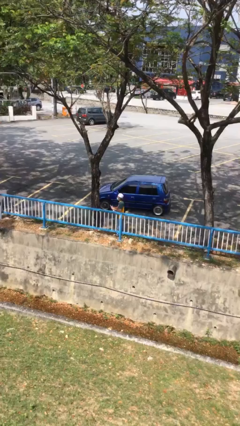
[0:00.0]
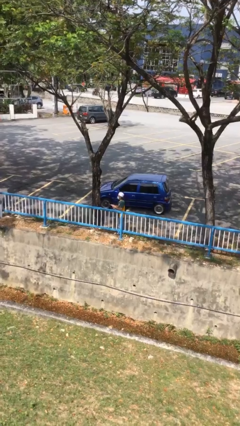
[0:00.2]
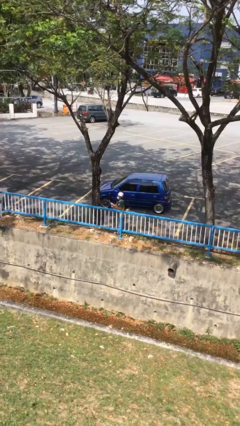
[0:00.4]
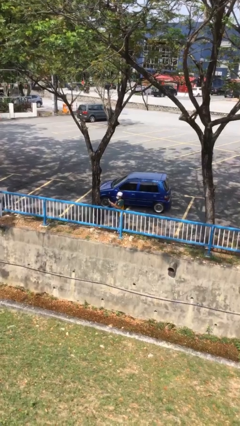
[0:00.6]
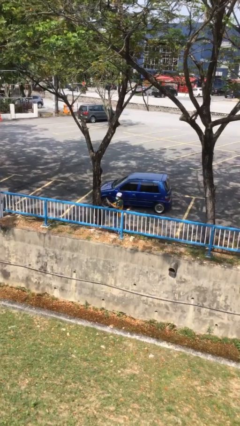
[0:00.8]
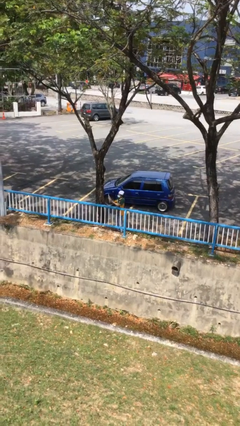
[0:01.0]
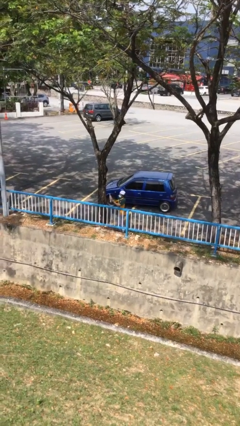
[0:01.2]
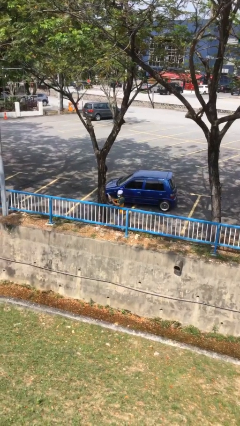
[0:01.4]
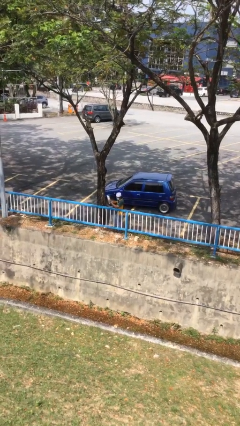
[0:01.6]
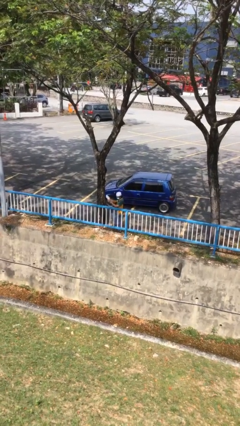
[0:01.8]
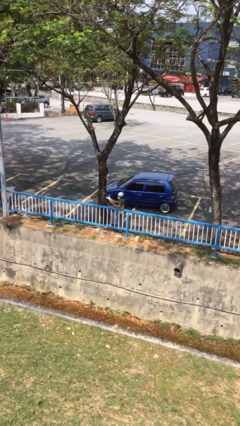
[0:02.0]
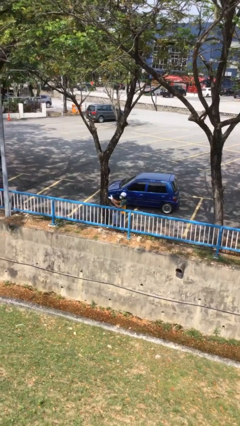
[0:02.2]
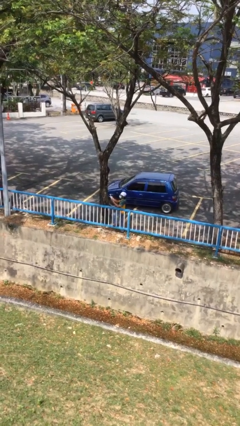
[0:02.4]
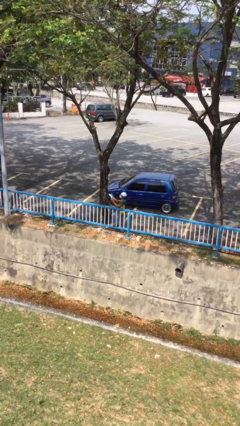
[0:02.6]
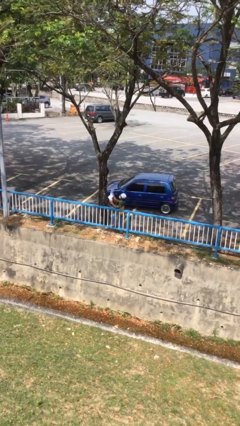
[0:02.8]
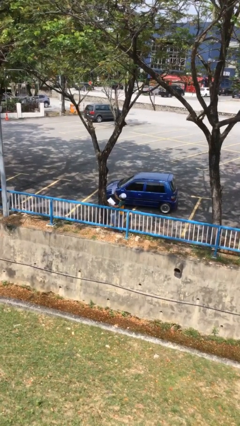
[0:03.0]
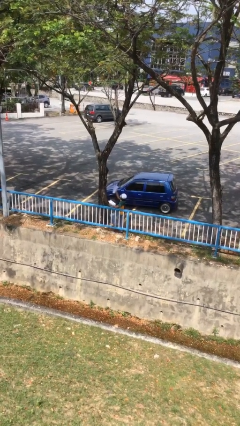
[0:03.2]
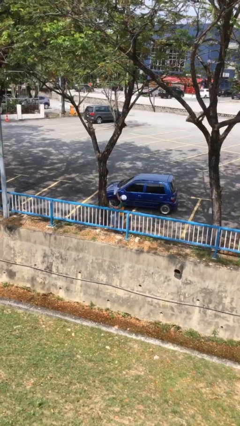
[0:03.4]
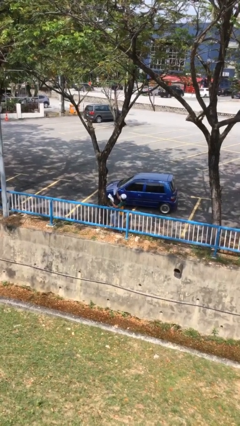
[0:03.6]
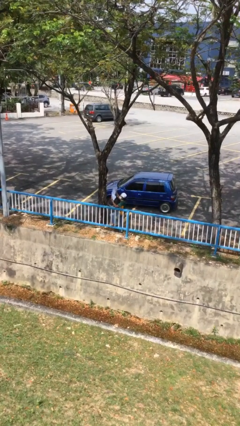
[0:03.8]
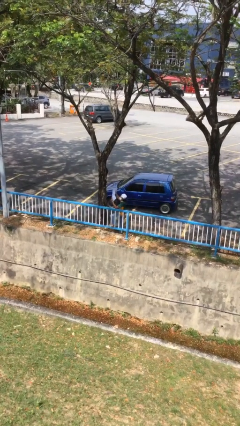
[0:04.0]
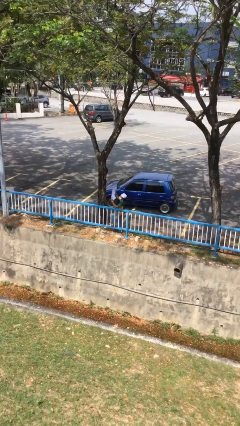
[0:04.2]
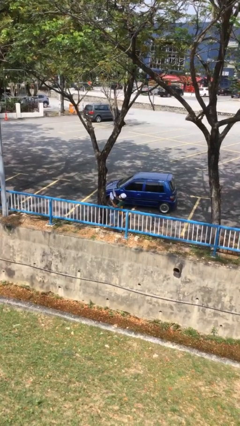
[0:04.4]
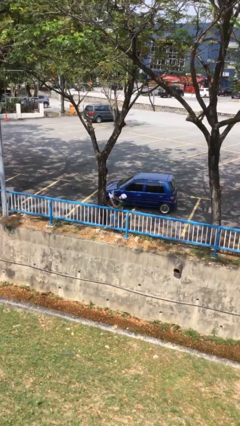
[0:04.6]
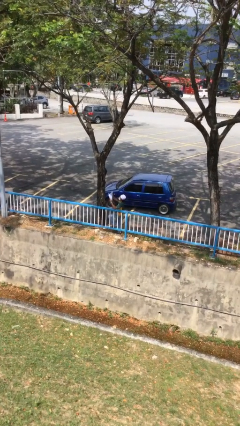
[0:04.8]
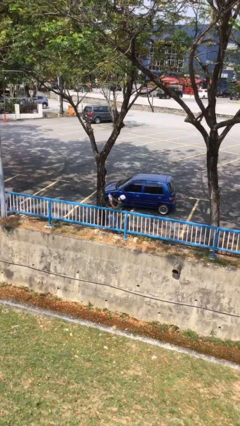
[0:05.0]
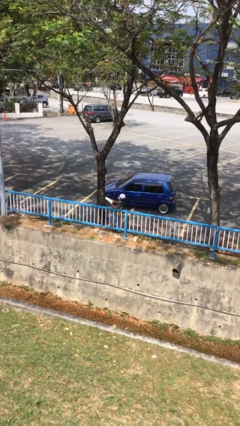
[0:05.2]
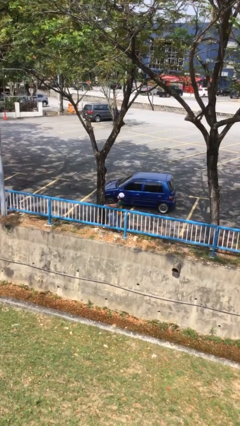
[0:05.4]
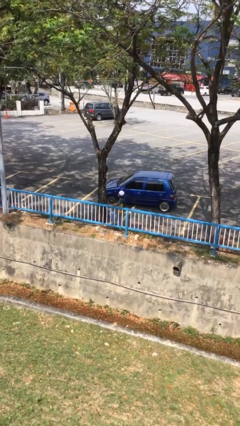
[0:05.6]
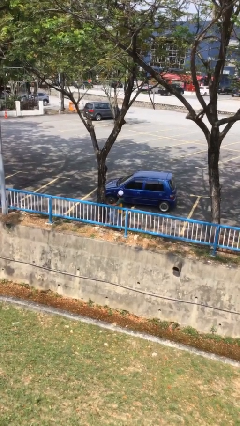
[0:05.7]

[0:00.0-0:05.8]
person reads document

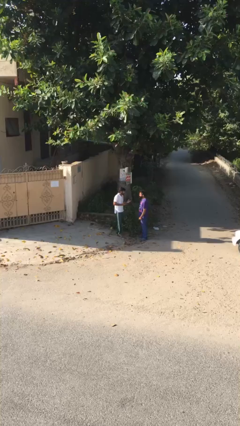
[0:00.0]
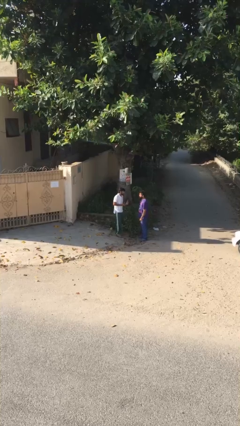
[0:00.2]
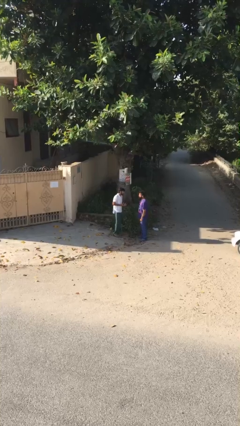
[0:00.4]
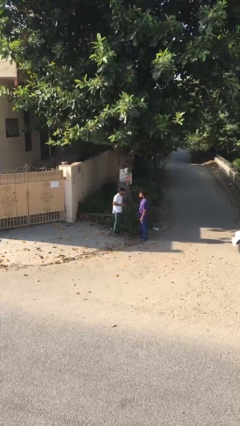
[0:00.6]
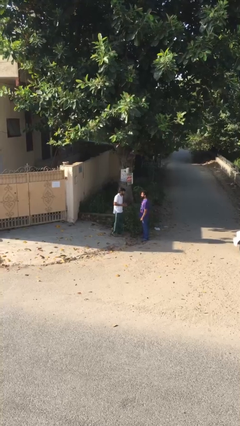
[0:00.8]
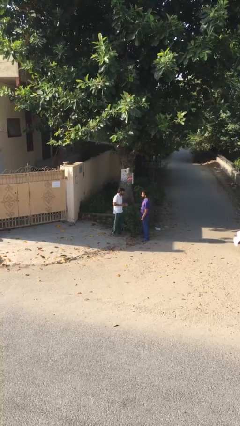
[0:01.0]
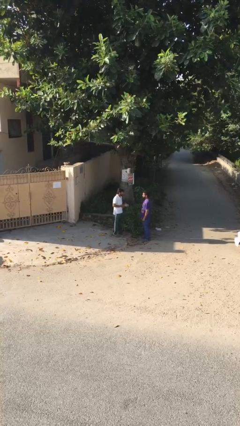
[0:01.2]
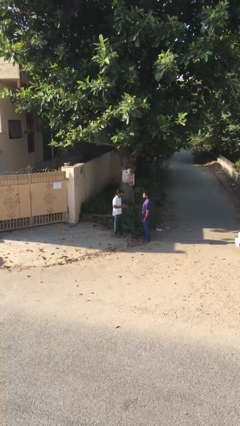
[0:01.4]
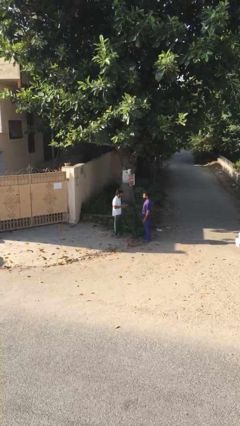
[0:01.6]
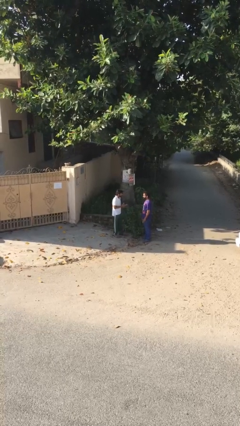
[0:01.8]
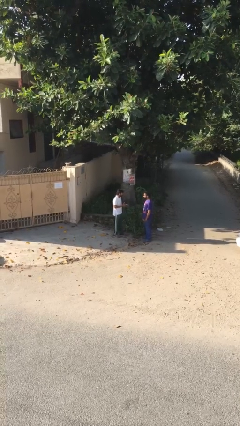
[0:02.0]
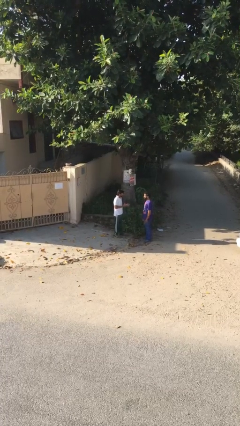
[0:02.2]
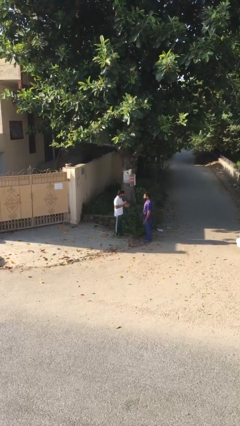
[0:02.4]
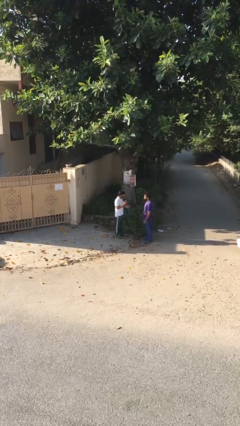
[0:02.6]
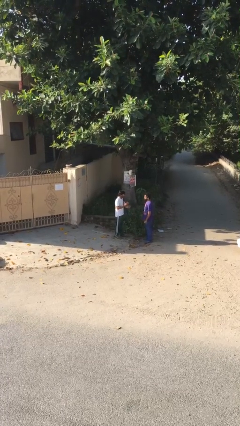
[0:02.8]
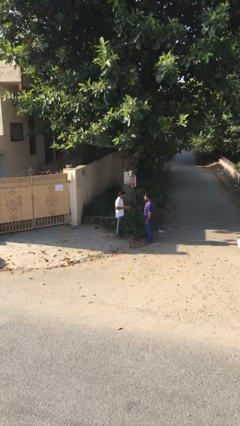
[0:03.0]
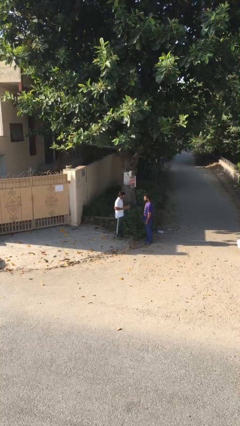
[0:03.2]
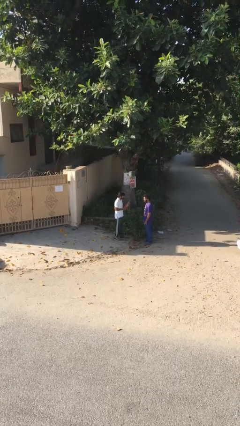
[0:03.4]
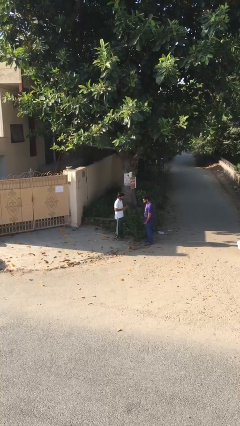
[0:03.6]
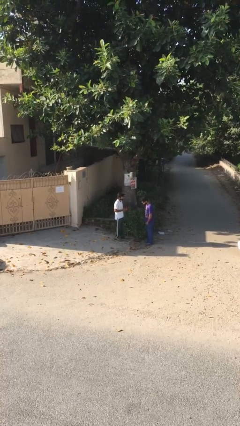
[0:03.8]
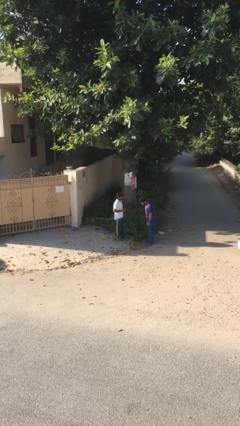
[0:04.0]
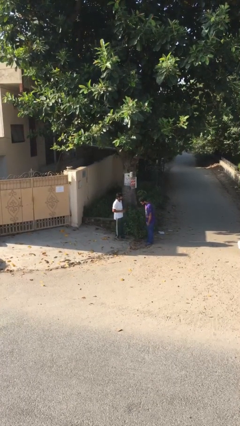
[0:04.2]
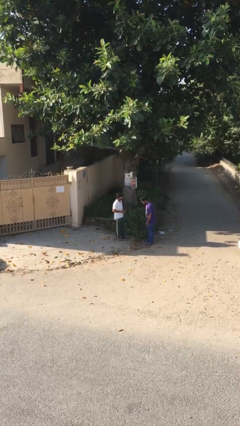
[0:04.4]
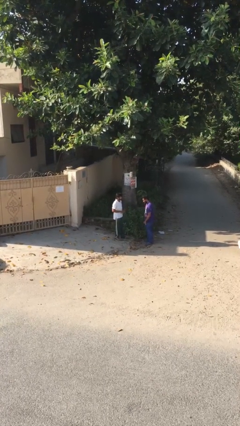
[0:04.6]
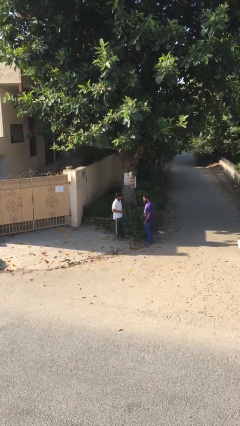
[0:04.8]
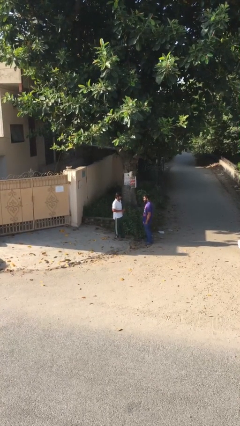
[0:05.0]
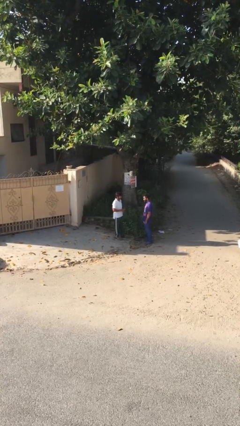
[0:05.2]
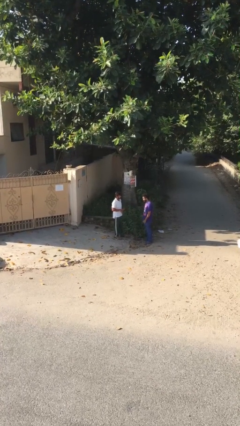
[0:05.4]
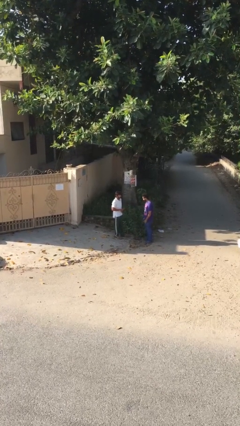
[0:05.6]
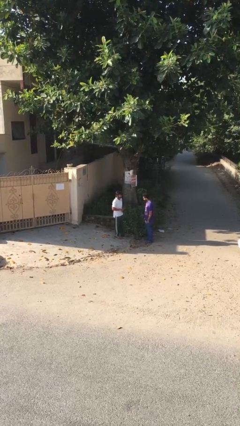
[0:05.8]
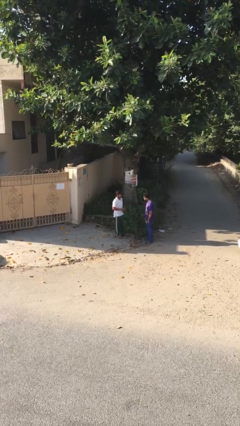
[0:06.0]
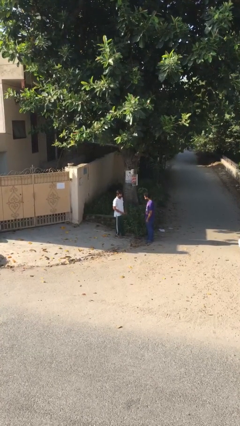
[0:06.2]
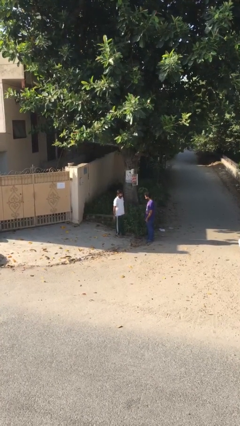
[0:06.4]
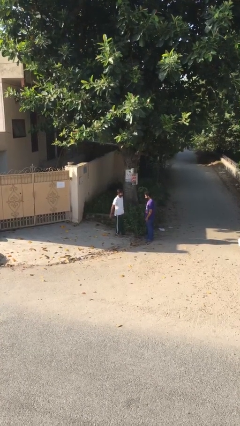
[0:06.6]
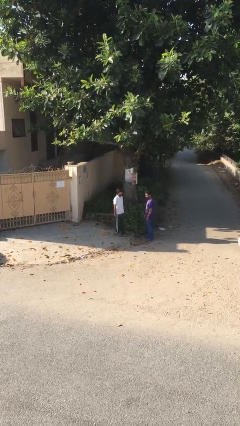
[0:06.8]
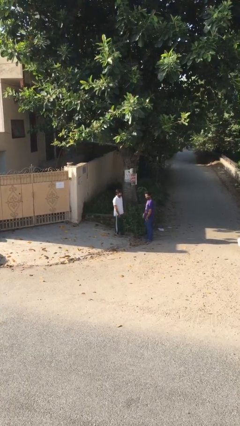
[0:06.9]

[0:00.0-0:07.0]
person talks to person

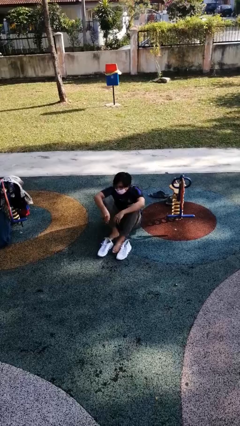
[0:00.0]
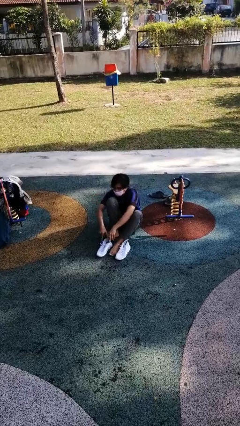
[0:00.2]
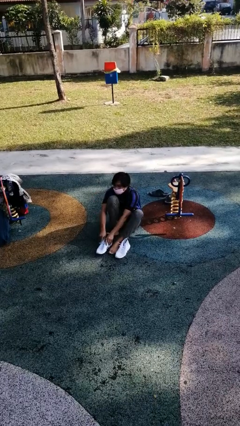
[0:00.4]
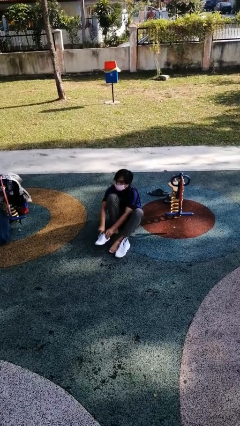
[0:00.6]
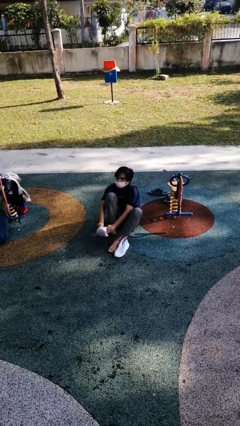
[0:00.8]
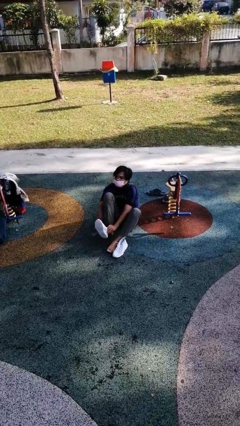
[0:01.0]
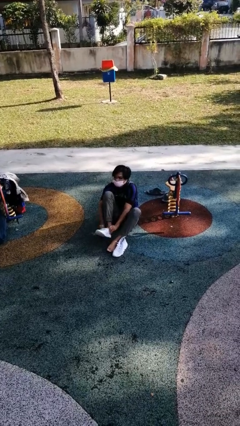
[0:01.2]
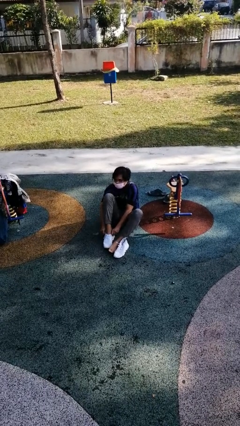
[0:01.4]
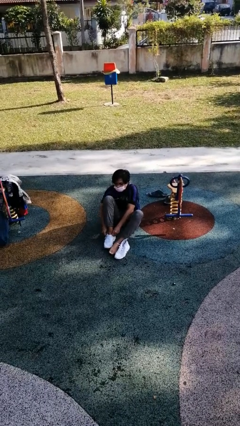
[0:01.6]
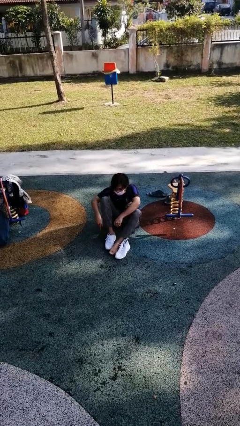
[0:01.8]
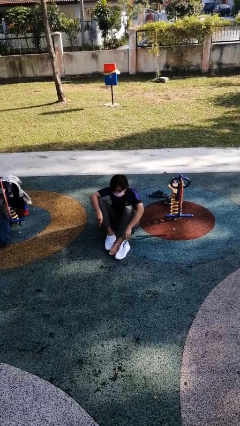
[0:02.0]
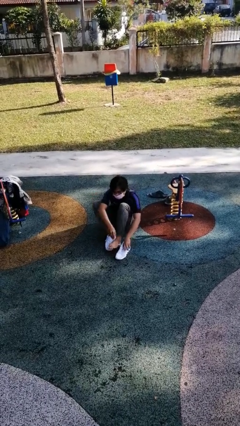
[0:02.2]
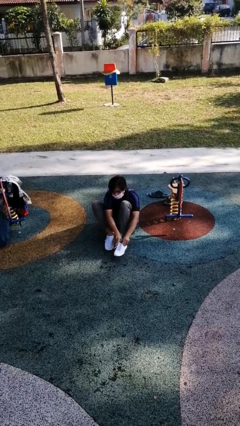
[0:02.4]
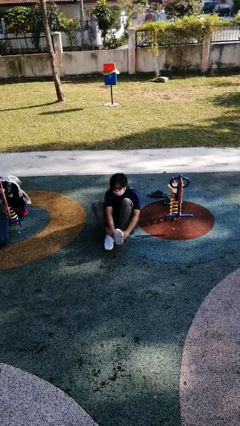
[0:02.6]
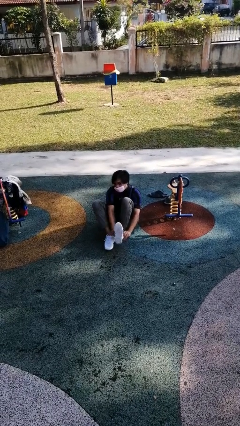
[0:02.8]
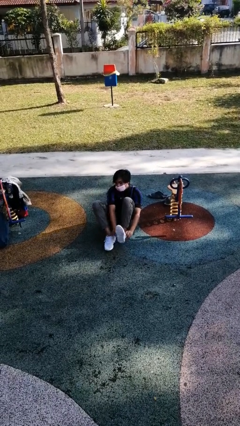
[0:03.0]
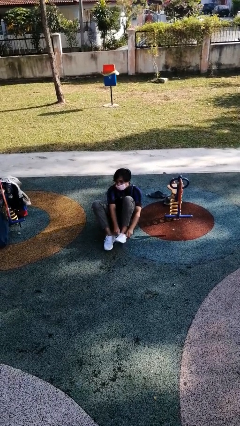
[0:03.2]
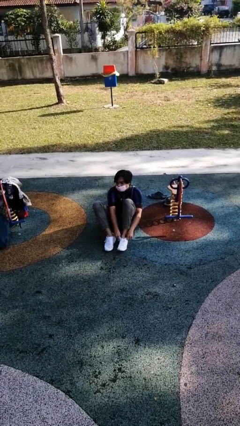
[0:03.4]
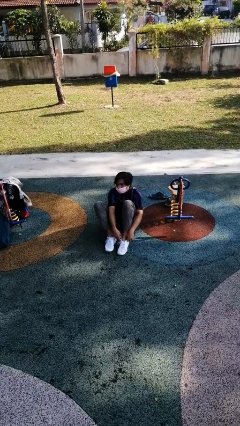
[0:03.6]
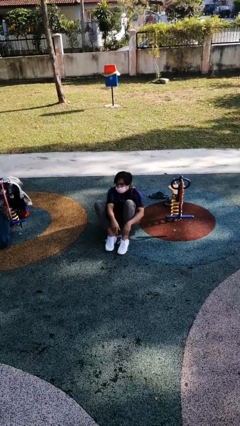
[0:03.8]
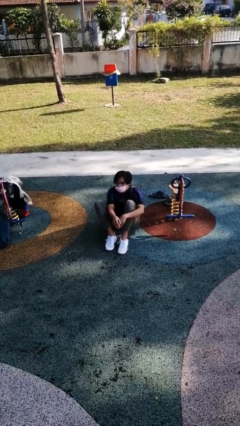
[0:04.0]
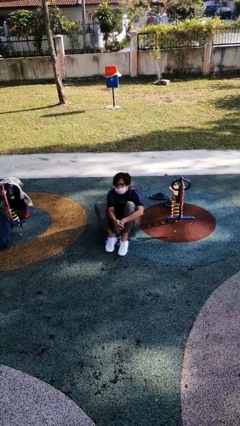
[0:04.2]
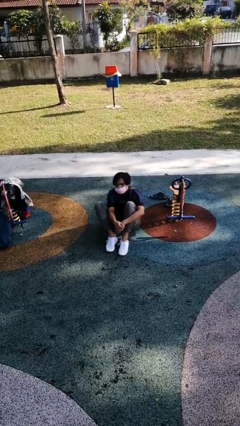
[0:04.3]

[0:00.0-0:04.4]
person puts on shoes

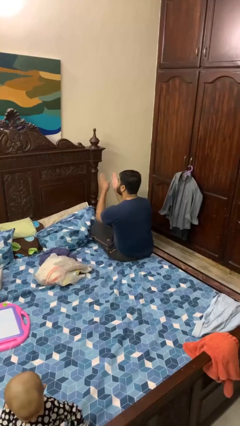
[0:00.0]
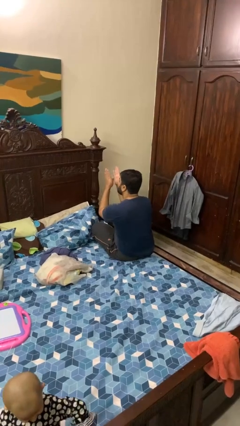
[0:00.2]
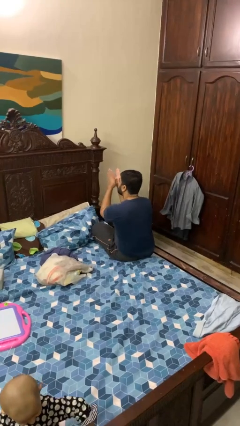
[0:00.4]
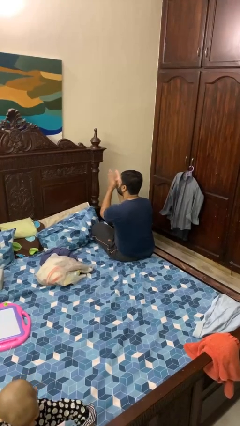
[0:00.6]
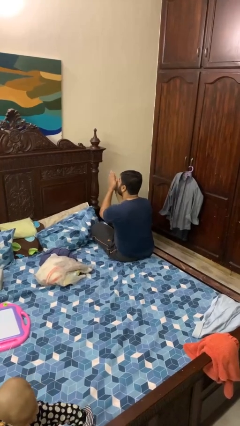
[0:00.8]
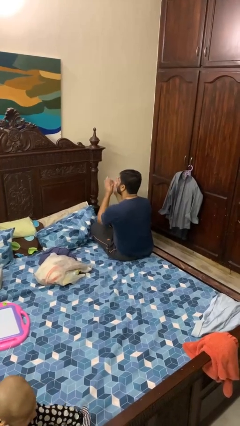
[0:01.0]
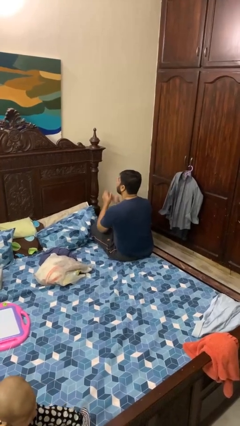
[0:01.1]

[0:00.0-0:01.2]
person claps hands
